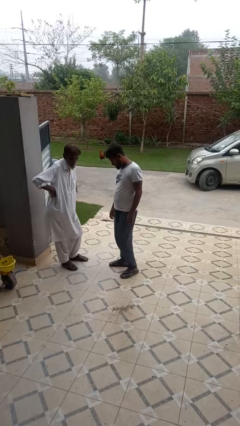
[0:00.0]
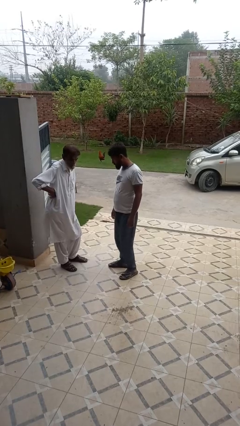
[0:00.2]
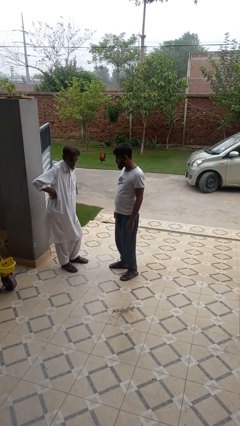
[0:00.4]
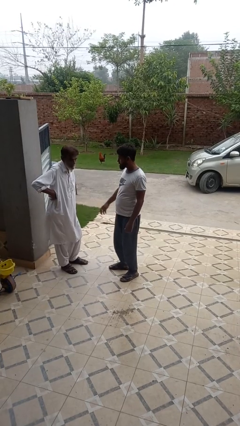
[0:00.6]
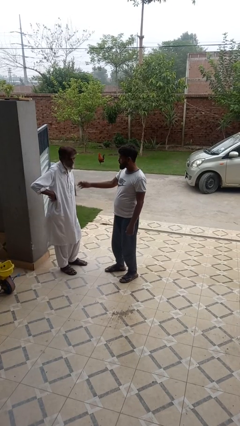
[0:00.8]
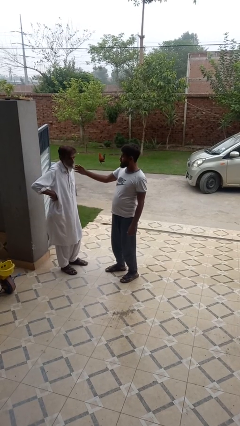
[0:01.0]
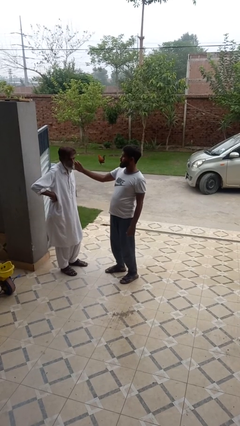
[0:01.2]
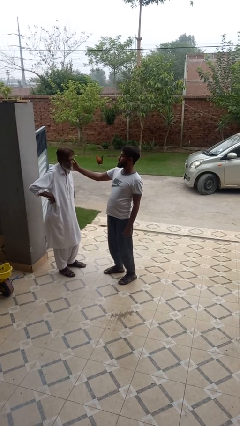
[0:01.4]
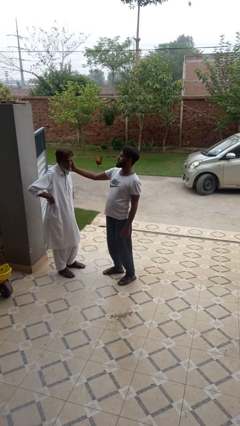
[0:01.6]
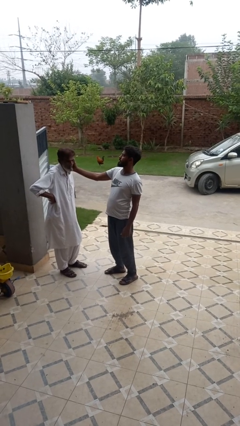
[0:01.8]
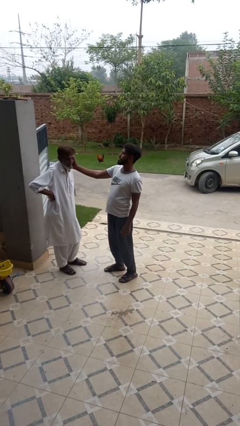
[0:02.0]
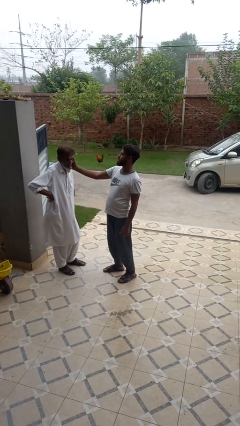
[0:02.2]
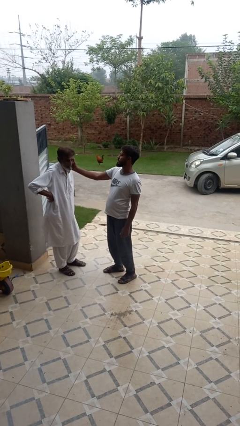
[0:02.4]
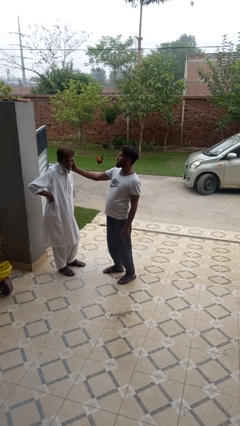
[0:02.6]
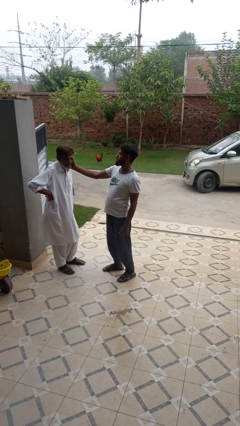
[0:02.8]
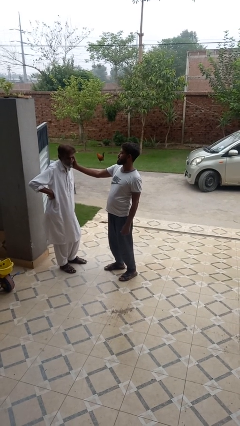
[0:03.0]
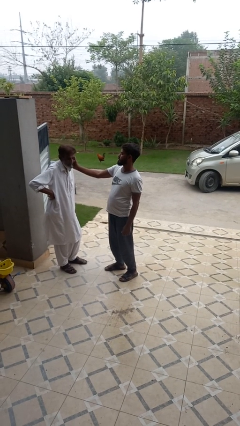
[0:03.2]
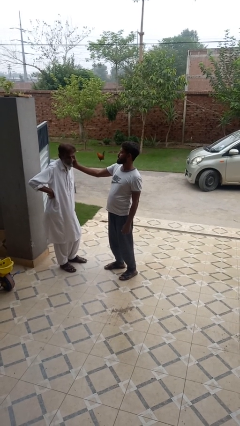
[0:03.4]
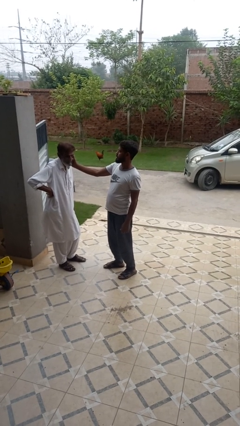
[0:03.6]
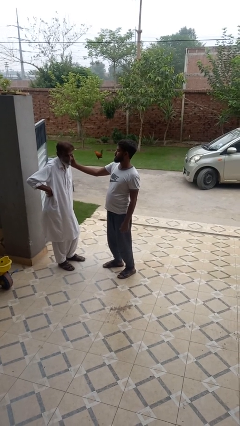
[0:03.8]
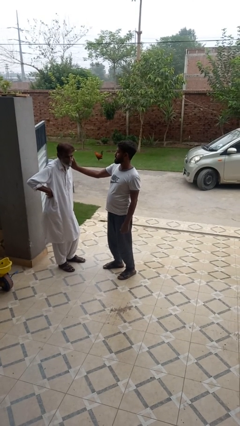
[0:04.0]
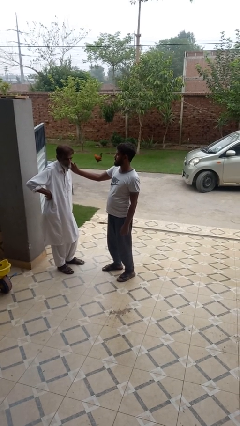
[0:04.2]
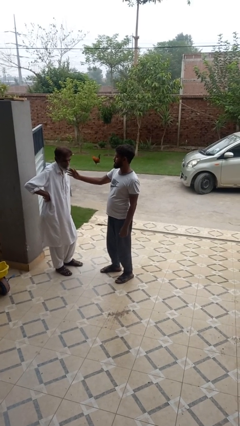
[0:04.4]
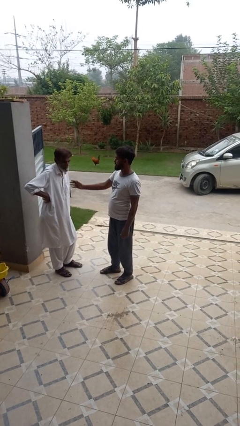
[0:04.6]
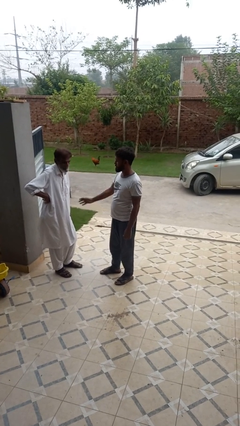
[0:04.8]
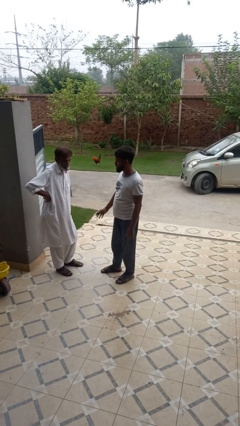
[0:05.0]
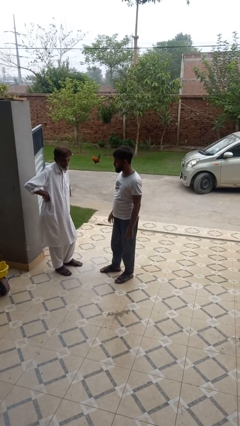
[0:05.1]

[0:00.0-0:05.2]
person touches face of person

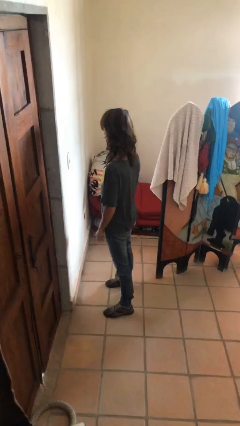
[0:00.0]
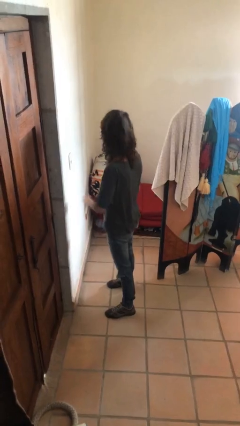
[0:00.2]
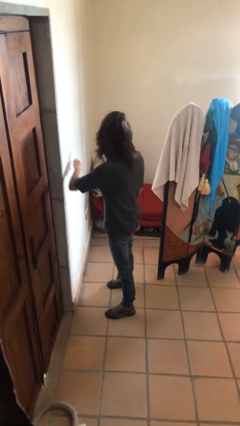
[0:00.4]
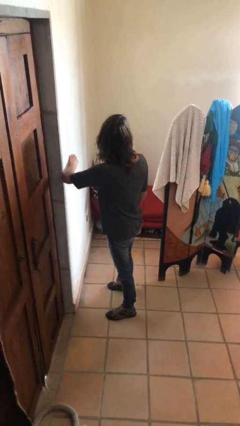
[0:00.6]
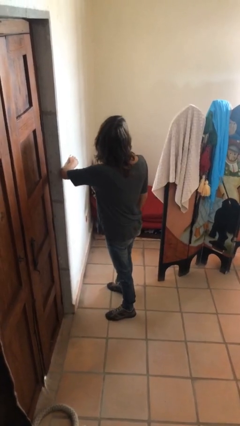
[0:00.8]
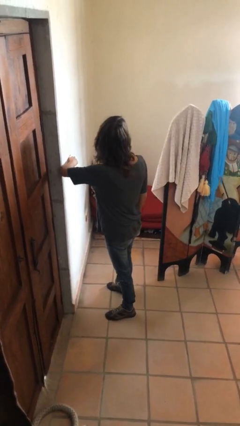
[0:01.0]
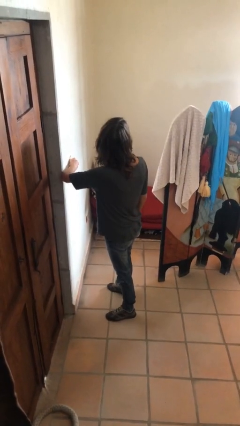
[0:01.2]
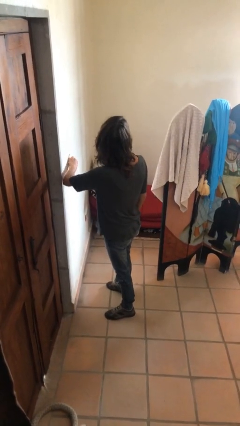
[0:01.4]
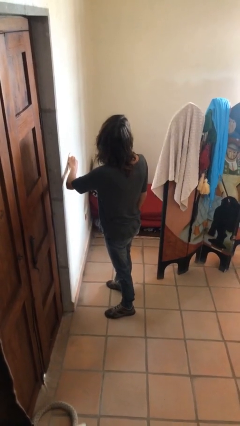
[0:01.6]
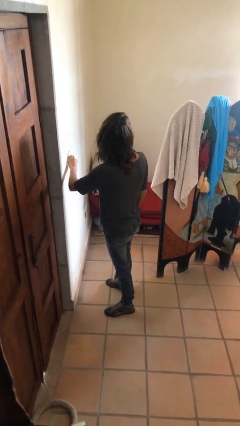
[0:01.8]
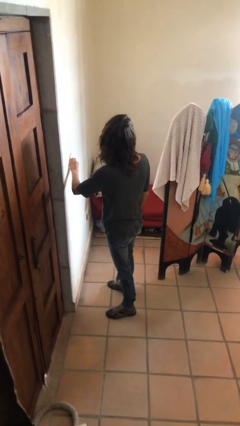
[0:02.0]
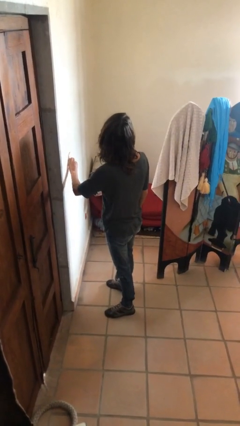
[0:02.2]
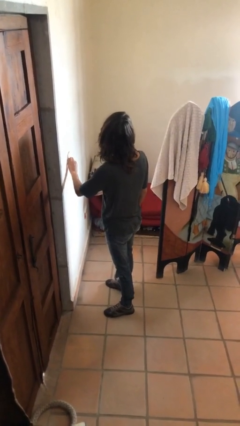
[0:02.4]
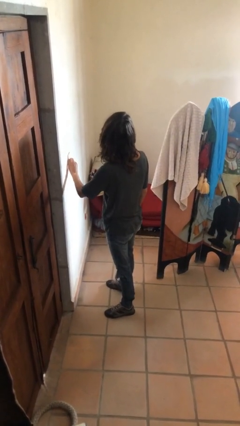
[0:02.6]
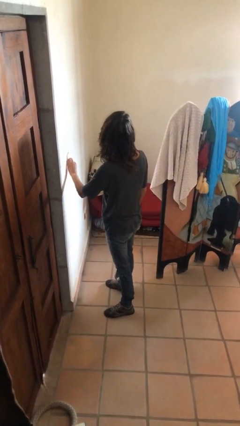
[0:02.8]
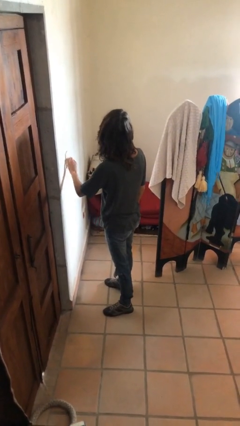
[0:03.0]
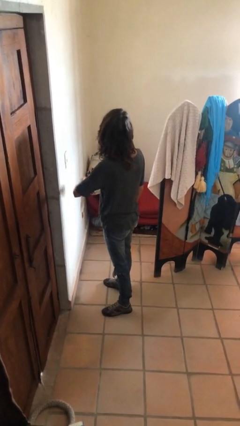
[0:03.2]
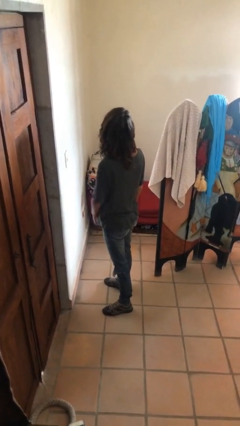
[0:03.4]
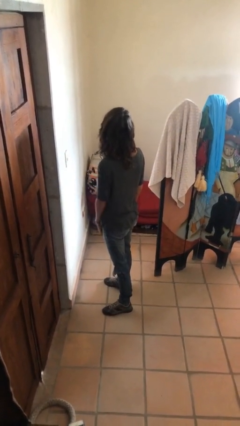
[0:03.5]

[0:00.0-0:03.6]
person adjusts thermostat

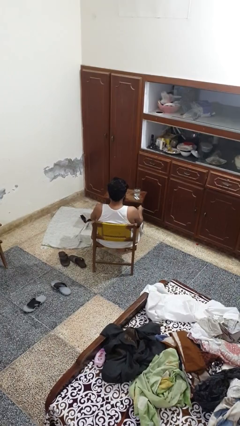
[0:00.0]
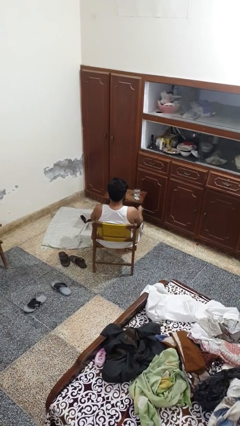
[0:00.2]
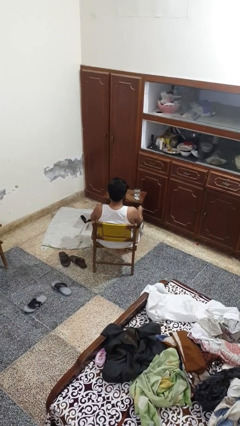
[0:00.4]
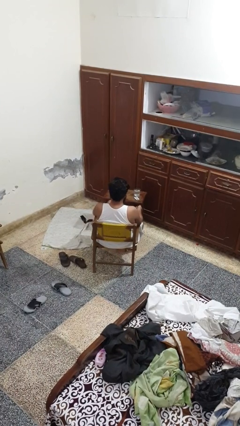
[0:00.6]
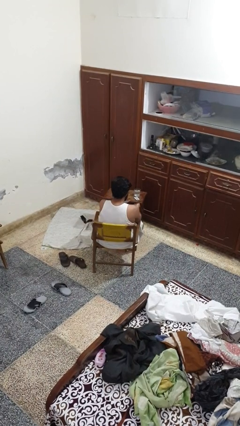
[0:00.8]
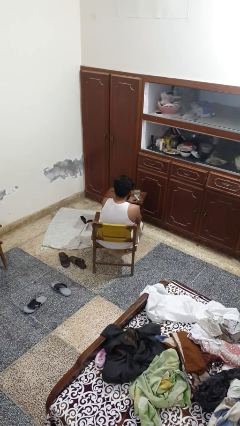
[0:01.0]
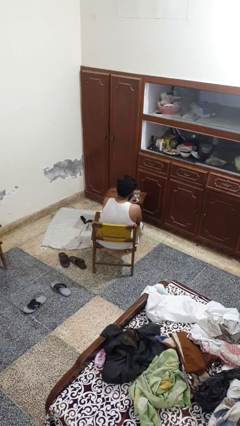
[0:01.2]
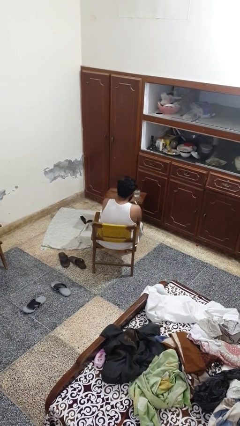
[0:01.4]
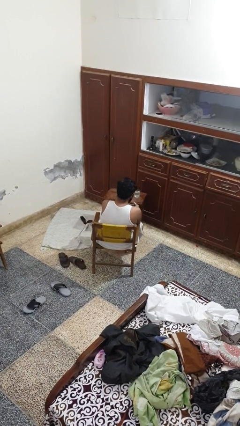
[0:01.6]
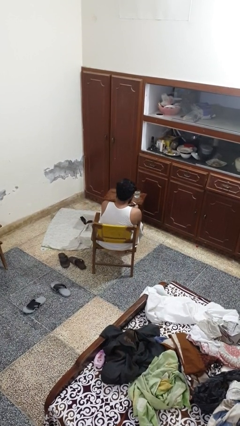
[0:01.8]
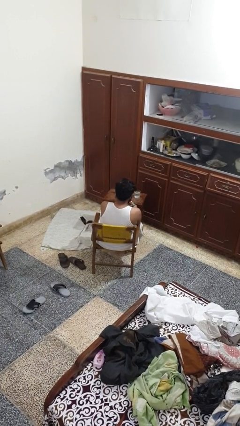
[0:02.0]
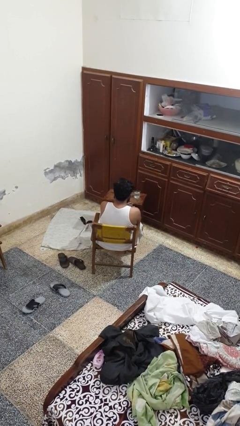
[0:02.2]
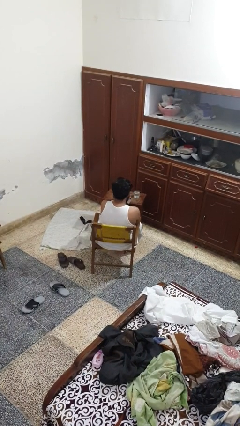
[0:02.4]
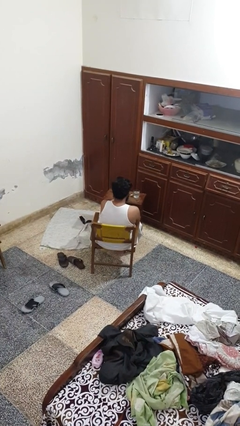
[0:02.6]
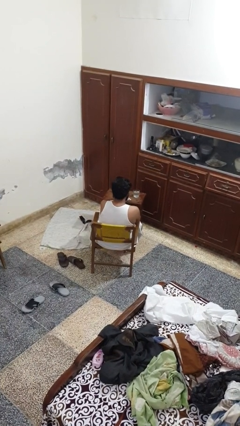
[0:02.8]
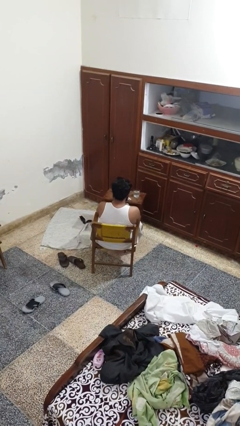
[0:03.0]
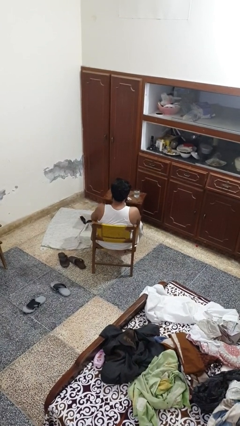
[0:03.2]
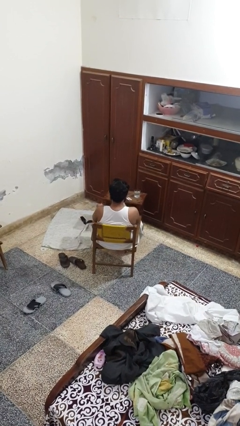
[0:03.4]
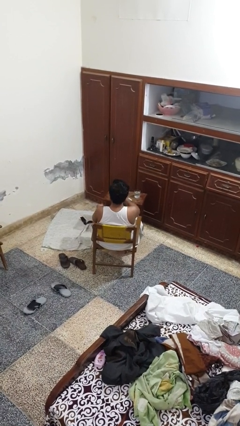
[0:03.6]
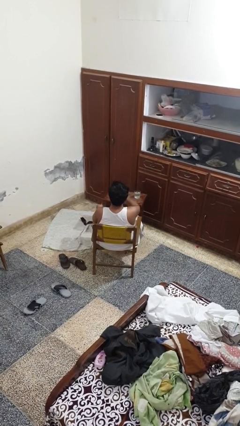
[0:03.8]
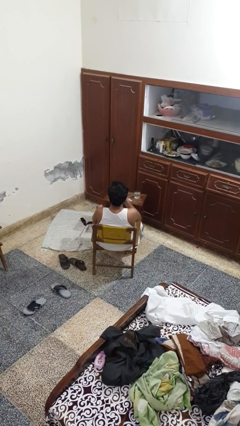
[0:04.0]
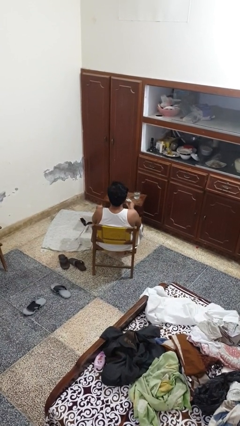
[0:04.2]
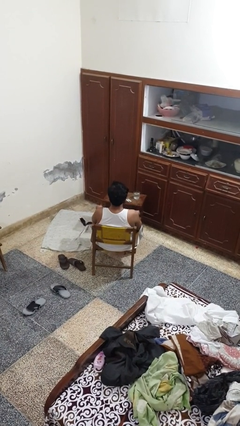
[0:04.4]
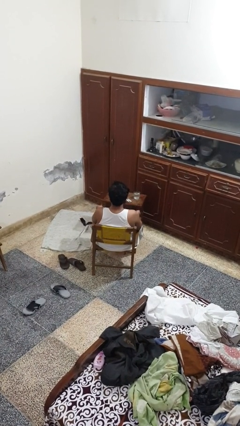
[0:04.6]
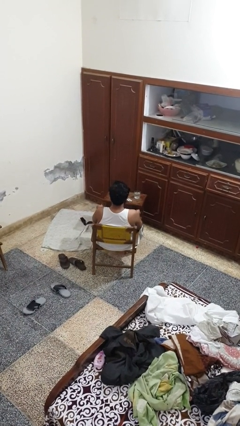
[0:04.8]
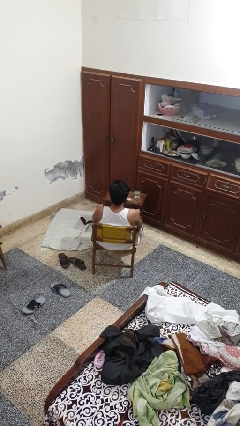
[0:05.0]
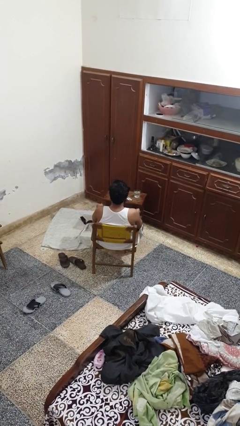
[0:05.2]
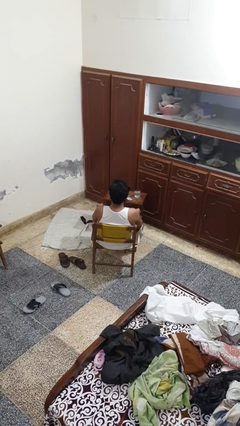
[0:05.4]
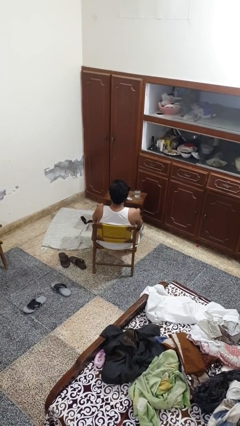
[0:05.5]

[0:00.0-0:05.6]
person takes medicine pills

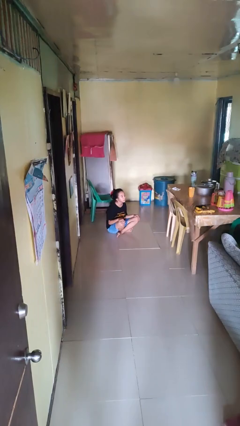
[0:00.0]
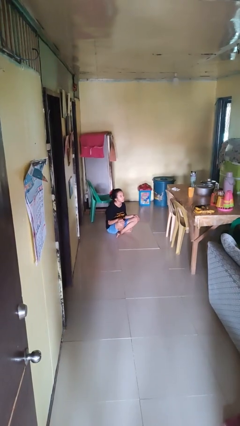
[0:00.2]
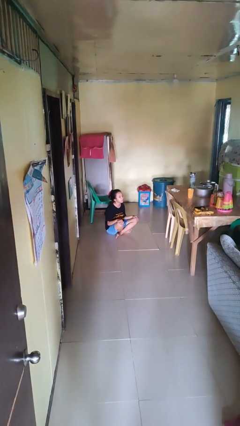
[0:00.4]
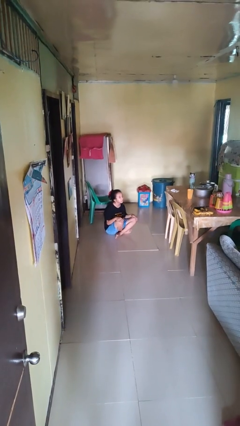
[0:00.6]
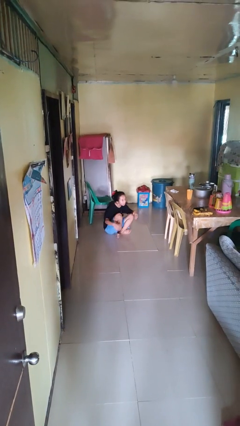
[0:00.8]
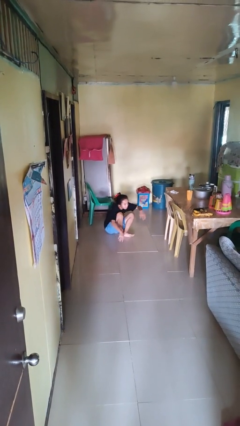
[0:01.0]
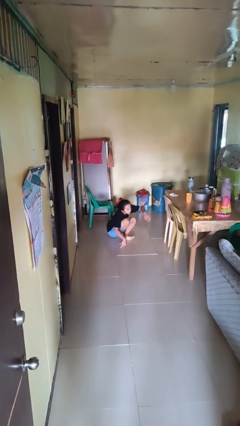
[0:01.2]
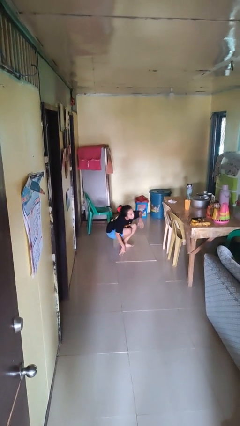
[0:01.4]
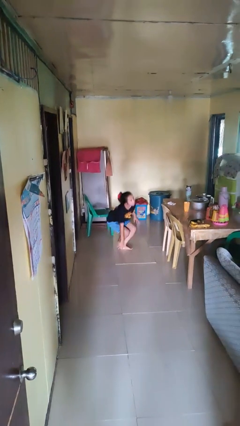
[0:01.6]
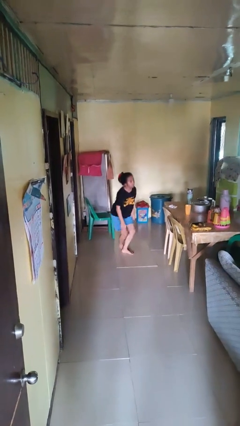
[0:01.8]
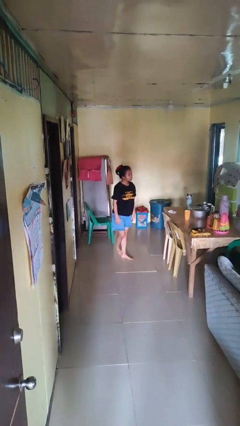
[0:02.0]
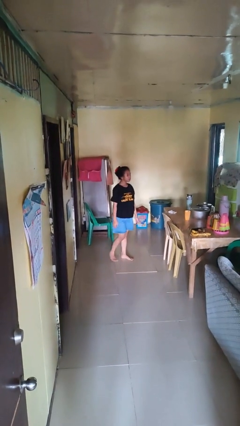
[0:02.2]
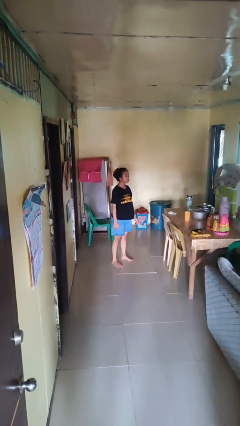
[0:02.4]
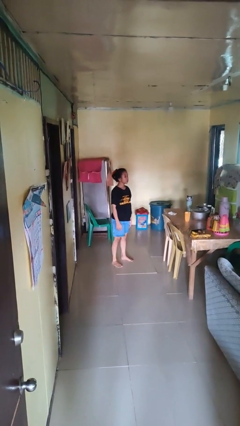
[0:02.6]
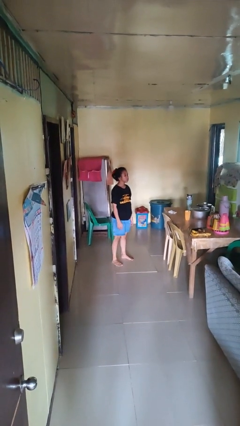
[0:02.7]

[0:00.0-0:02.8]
person stands up from floor

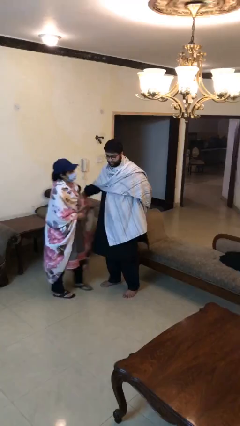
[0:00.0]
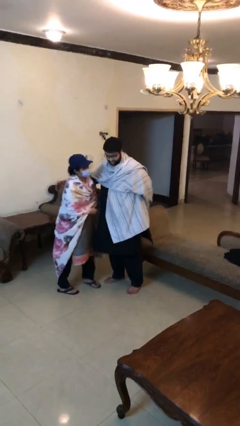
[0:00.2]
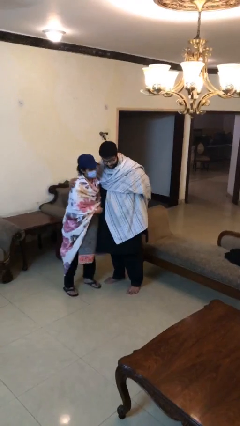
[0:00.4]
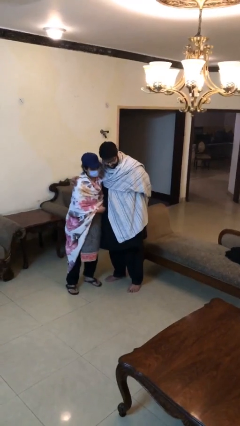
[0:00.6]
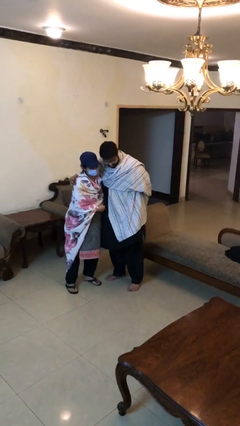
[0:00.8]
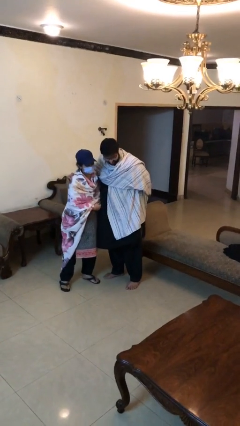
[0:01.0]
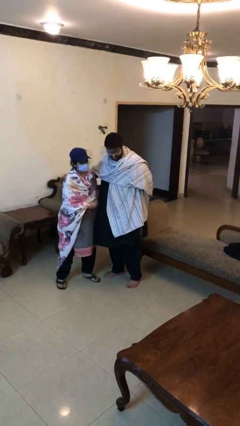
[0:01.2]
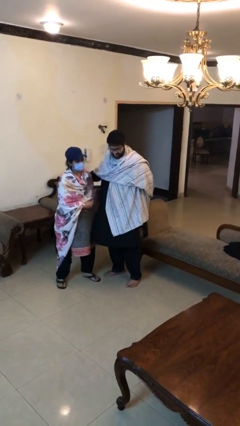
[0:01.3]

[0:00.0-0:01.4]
person embraces person
